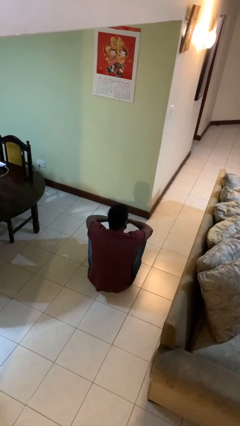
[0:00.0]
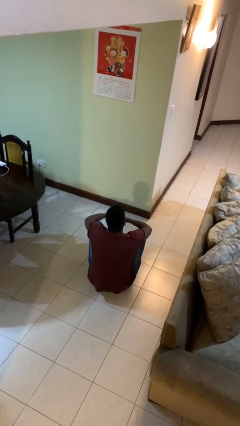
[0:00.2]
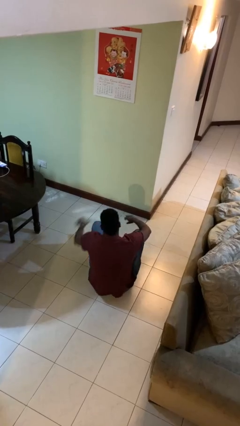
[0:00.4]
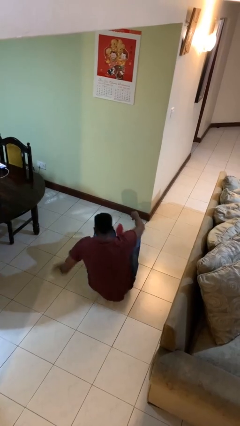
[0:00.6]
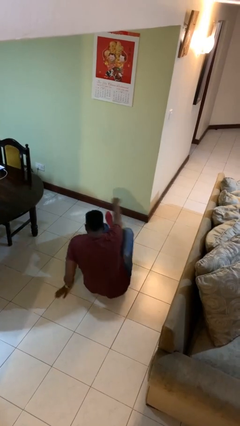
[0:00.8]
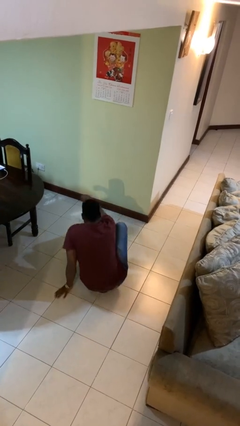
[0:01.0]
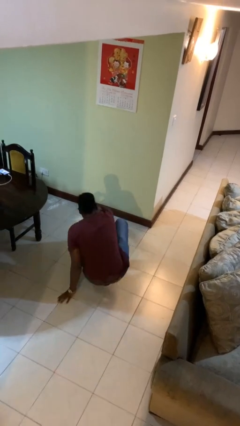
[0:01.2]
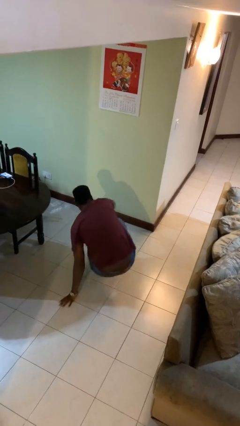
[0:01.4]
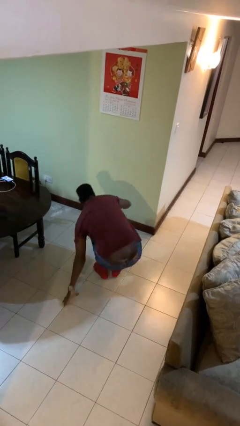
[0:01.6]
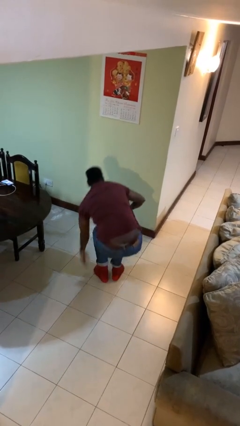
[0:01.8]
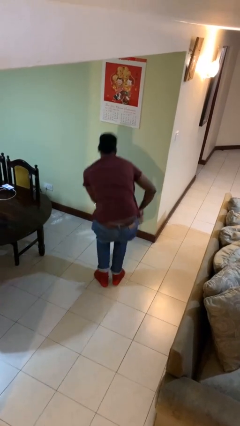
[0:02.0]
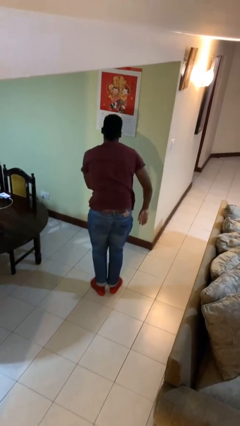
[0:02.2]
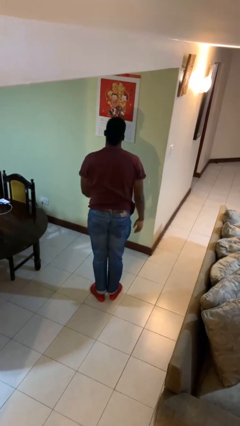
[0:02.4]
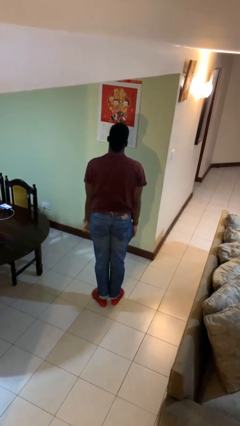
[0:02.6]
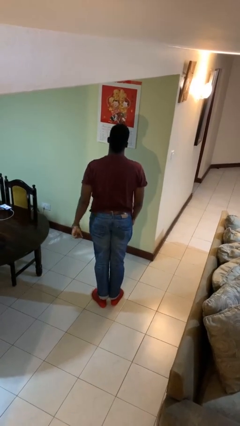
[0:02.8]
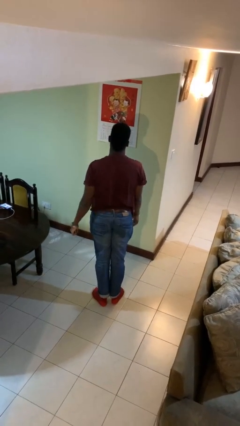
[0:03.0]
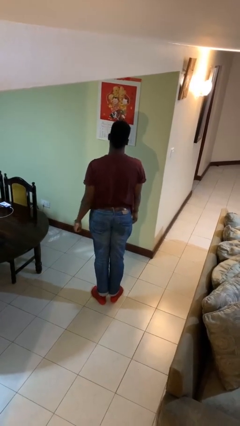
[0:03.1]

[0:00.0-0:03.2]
person stands up from floor

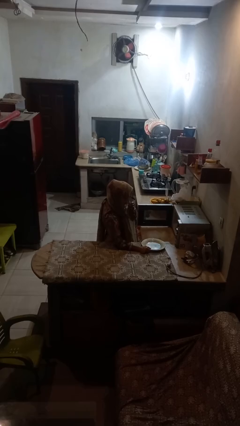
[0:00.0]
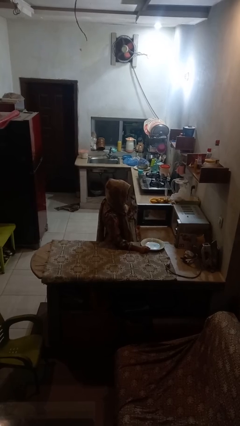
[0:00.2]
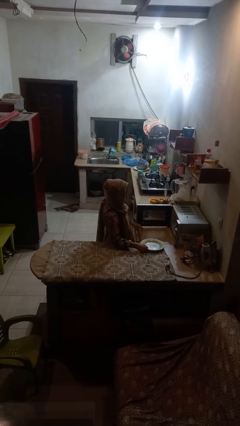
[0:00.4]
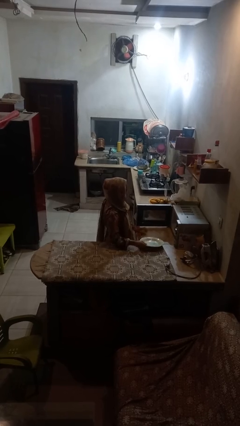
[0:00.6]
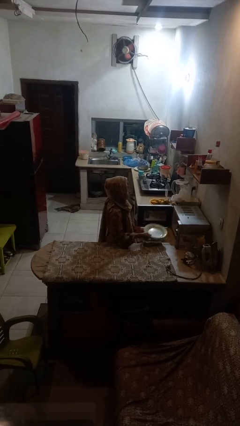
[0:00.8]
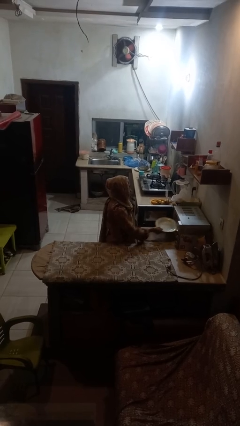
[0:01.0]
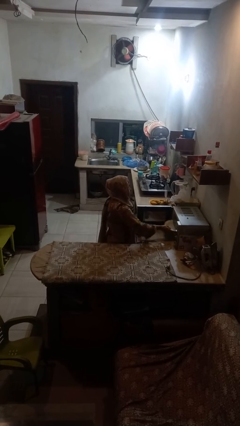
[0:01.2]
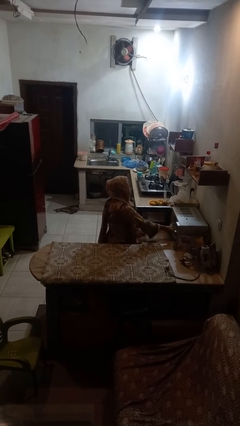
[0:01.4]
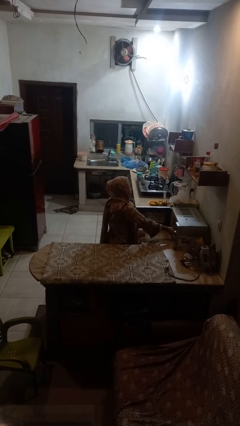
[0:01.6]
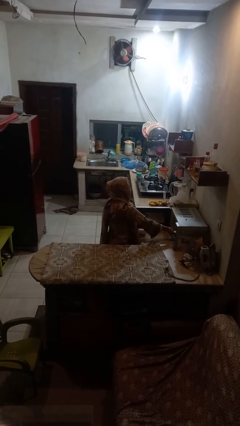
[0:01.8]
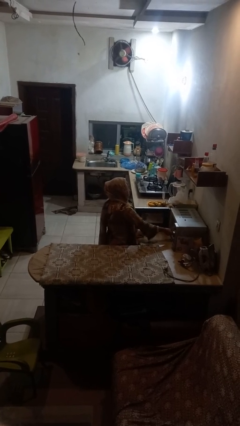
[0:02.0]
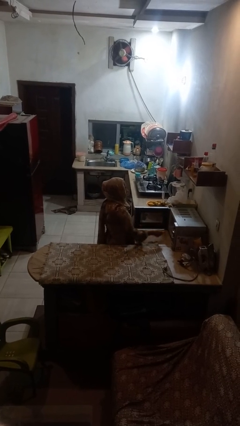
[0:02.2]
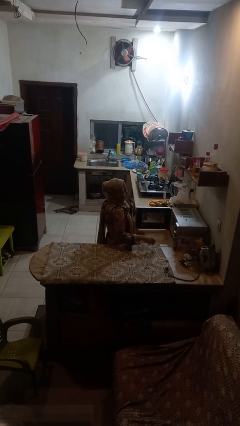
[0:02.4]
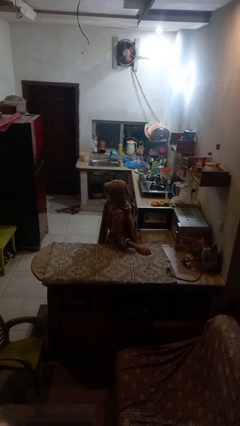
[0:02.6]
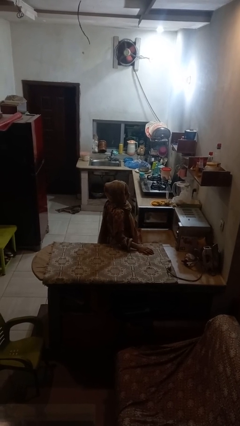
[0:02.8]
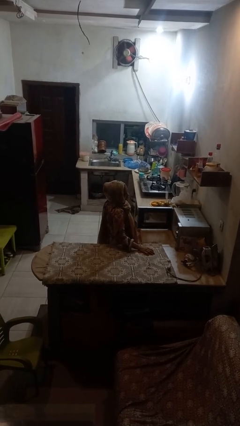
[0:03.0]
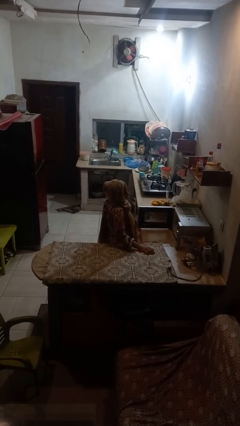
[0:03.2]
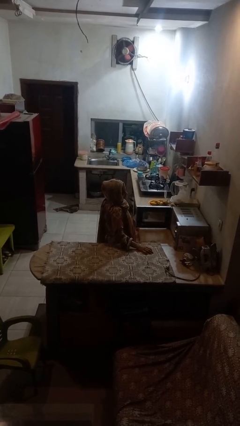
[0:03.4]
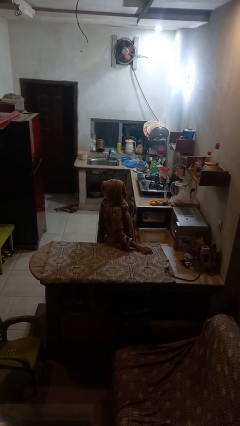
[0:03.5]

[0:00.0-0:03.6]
person puts object into microwave

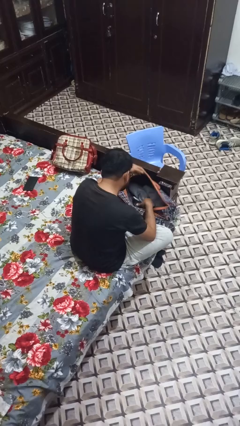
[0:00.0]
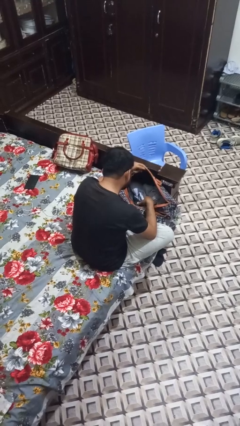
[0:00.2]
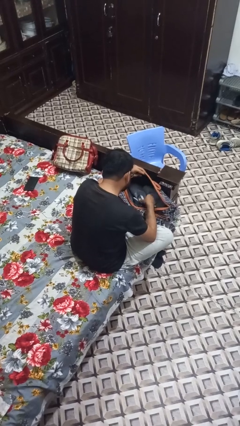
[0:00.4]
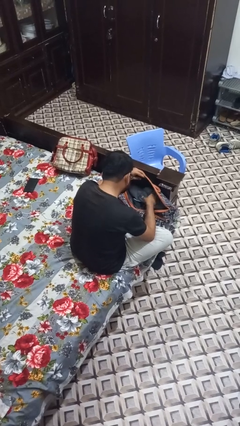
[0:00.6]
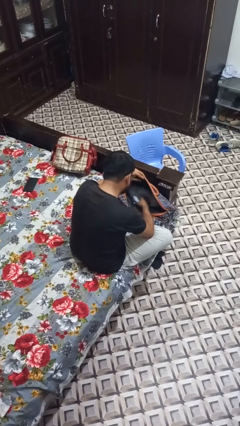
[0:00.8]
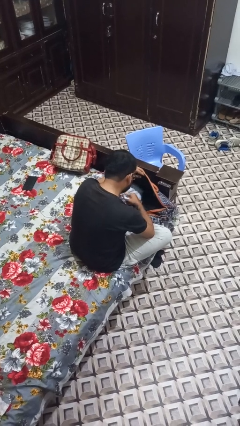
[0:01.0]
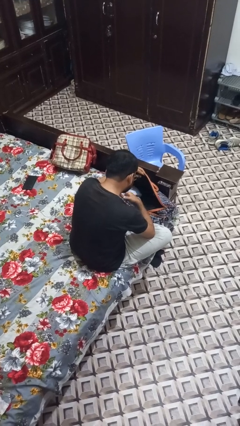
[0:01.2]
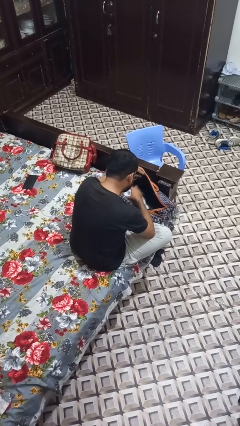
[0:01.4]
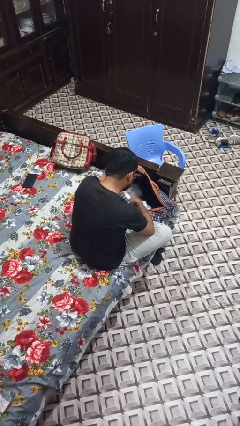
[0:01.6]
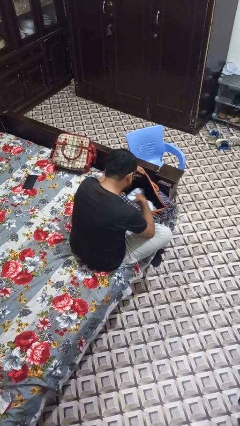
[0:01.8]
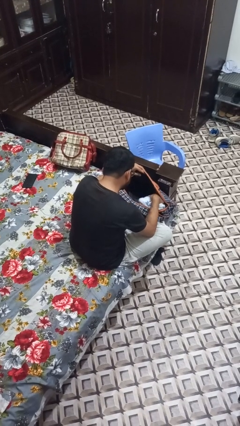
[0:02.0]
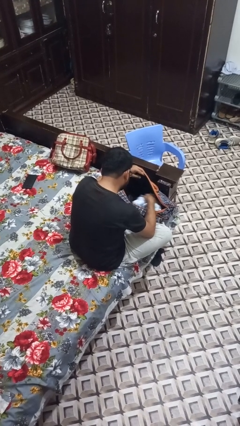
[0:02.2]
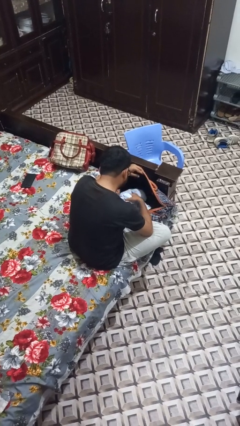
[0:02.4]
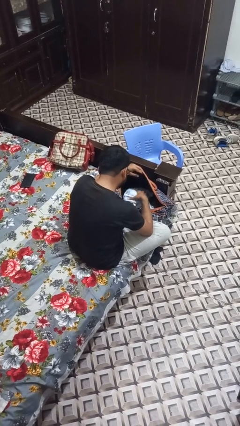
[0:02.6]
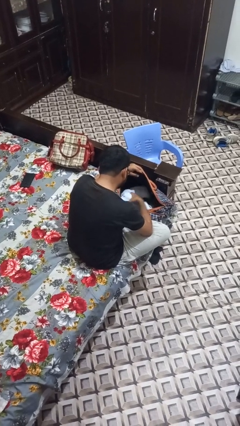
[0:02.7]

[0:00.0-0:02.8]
person searches in backpack

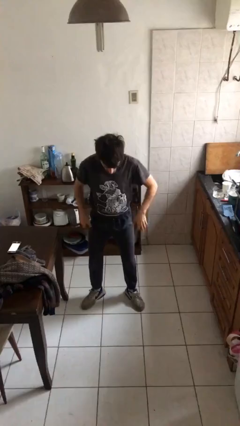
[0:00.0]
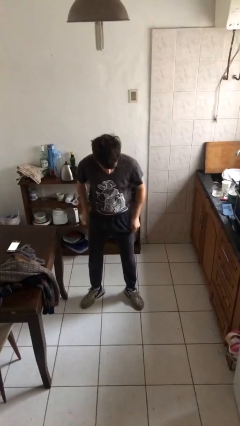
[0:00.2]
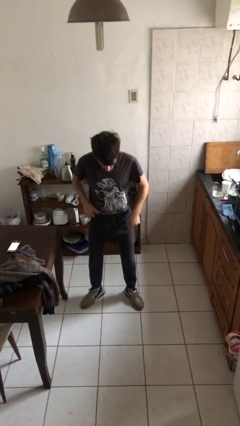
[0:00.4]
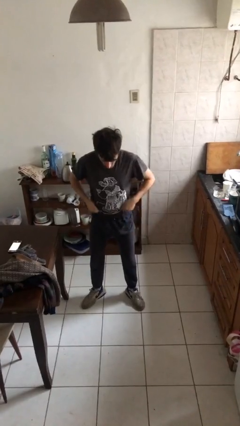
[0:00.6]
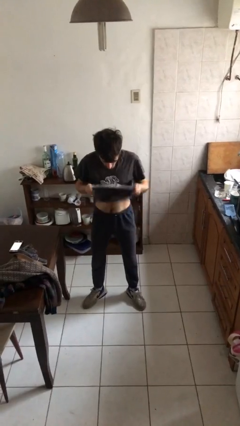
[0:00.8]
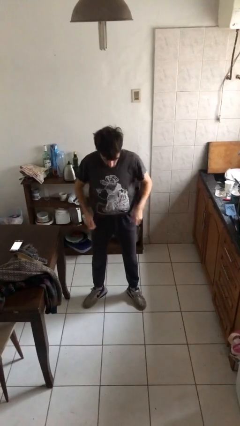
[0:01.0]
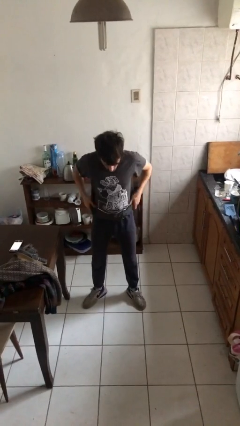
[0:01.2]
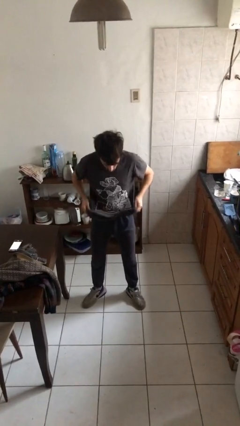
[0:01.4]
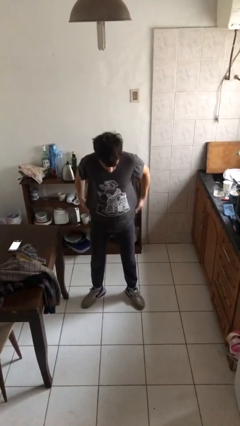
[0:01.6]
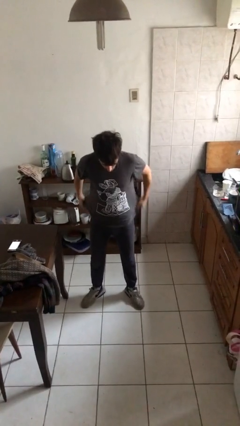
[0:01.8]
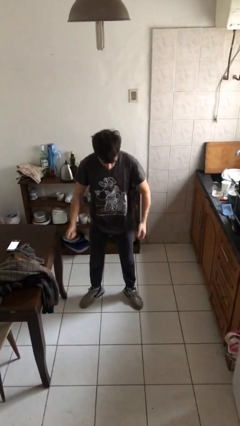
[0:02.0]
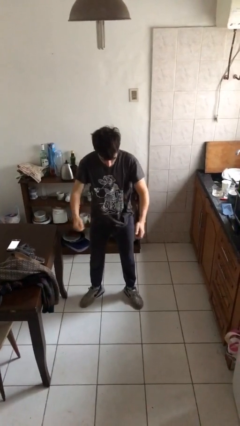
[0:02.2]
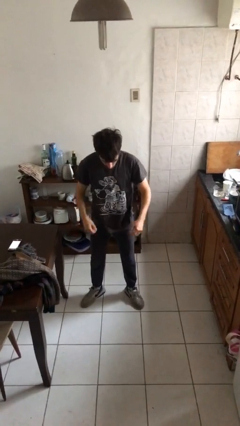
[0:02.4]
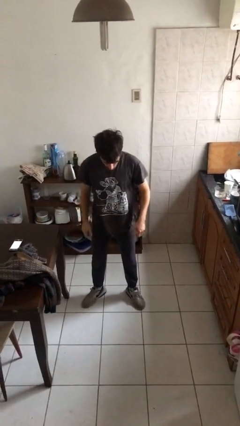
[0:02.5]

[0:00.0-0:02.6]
person untucks shirt

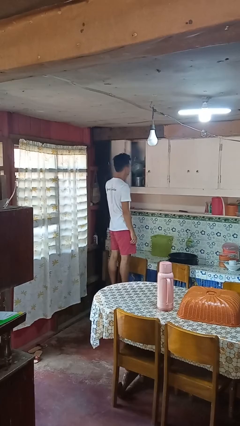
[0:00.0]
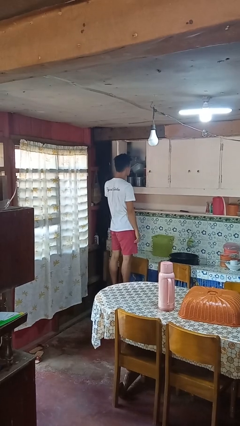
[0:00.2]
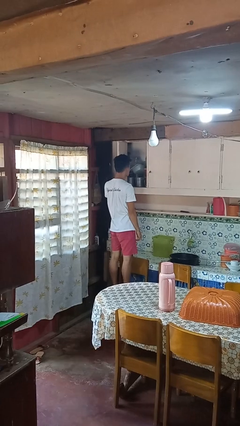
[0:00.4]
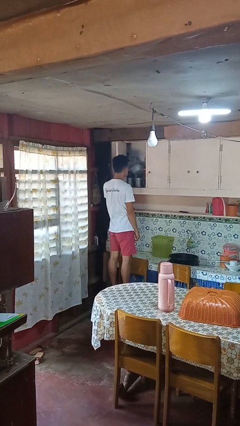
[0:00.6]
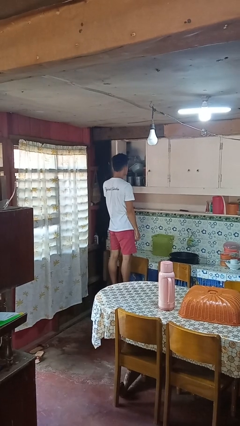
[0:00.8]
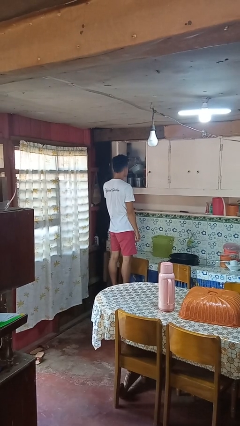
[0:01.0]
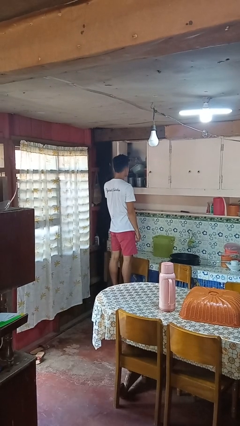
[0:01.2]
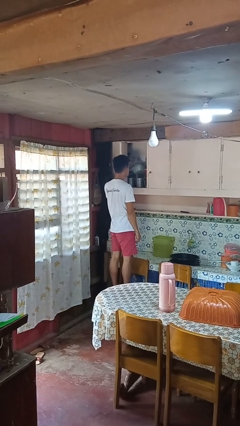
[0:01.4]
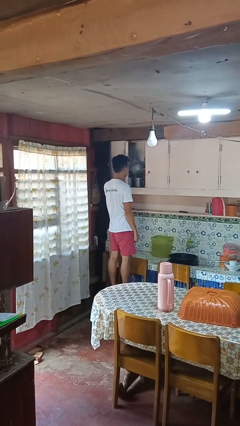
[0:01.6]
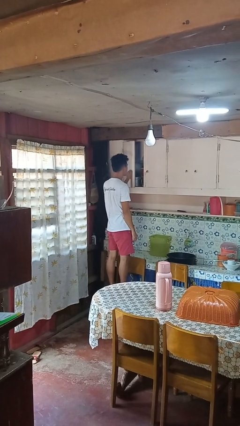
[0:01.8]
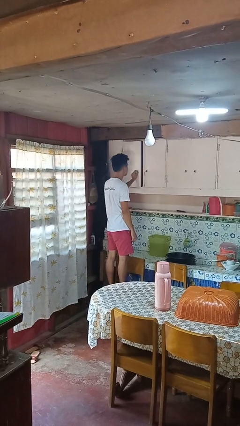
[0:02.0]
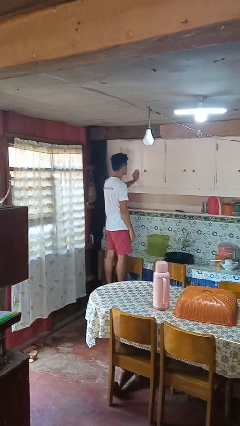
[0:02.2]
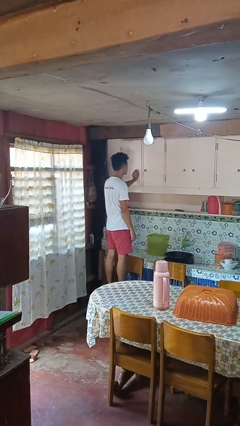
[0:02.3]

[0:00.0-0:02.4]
person opens cabinet

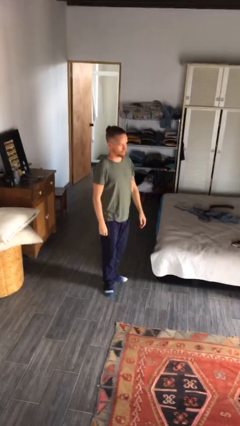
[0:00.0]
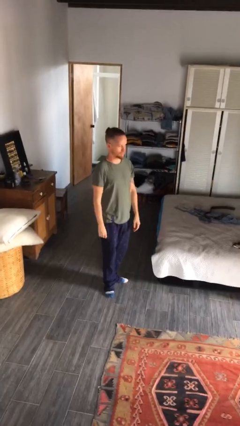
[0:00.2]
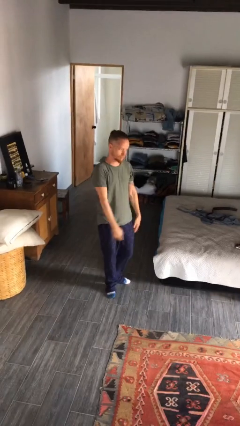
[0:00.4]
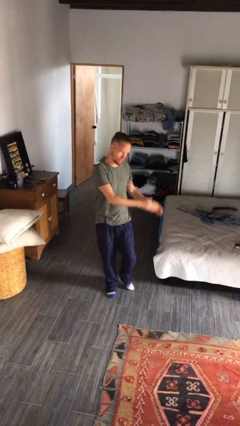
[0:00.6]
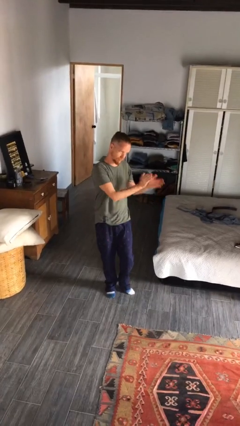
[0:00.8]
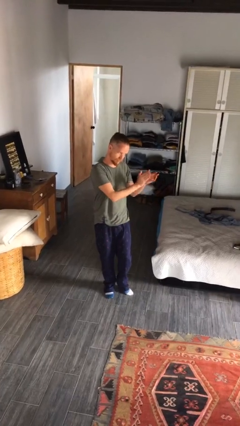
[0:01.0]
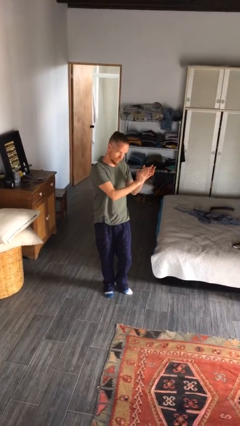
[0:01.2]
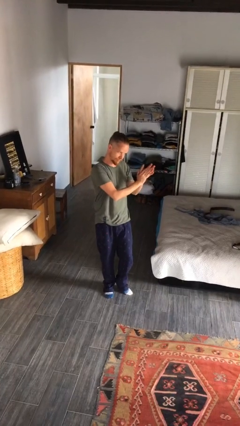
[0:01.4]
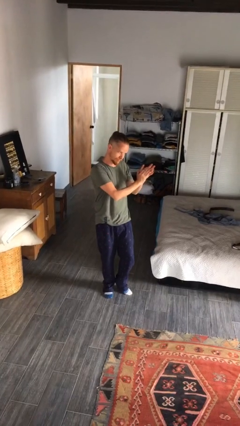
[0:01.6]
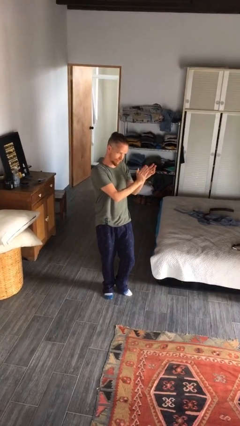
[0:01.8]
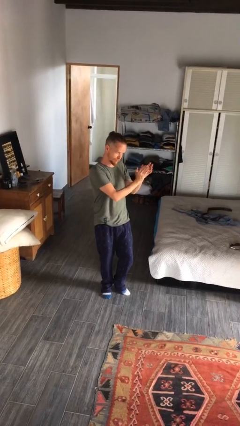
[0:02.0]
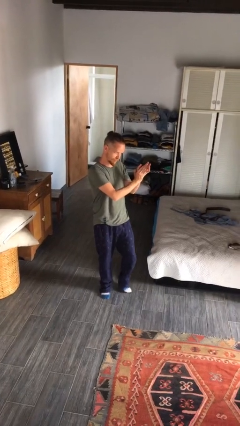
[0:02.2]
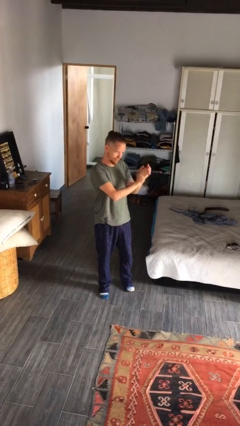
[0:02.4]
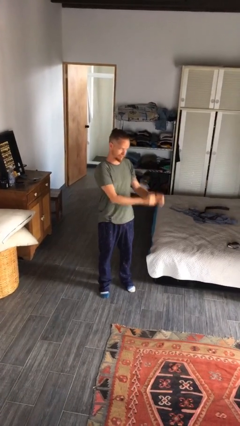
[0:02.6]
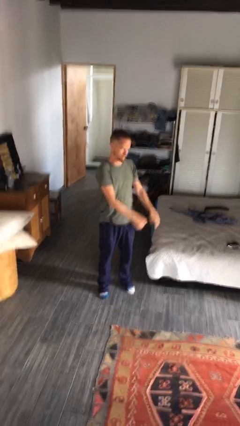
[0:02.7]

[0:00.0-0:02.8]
person claps hands
